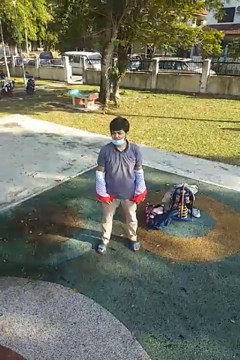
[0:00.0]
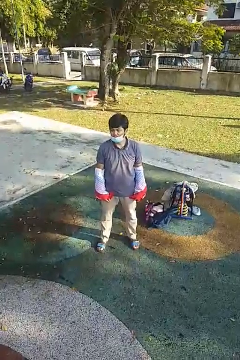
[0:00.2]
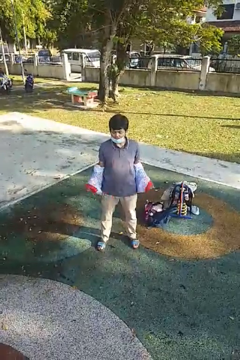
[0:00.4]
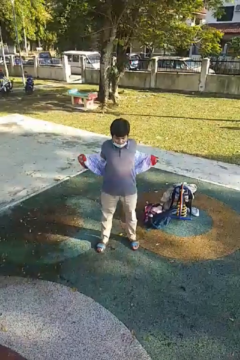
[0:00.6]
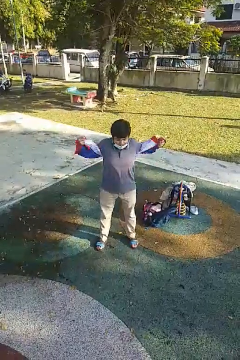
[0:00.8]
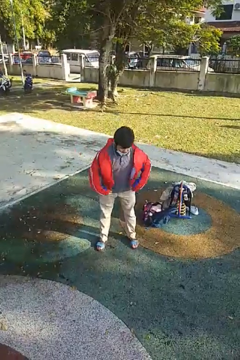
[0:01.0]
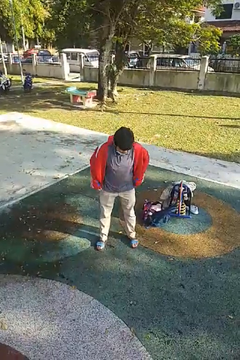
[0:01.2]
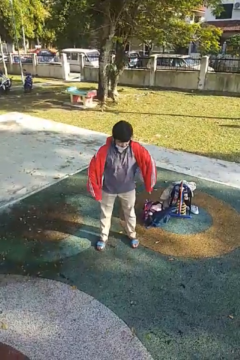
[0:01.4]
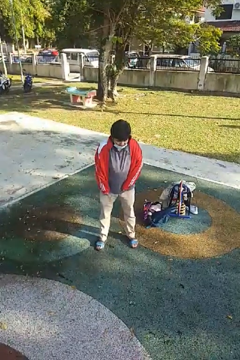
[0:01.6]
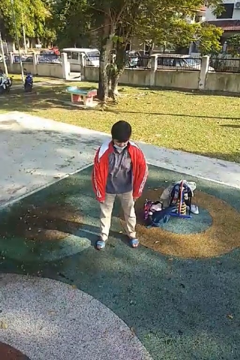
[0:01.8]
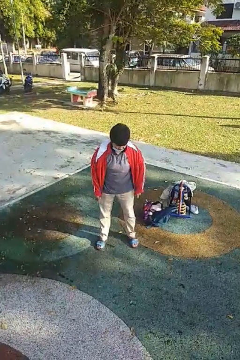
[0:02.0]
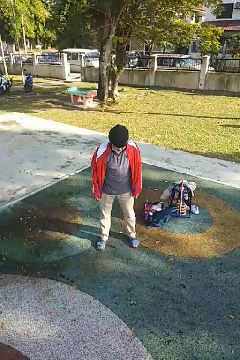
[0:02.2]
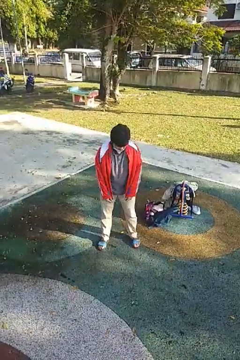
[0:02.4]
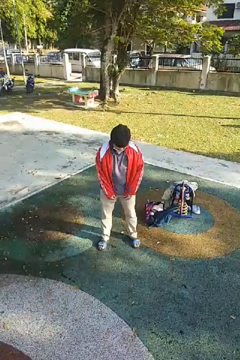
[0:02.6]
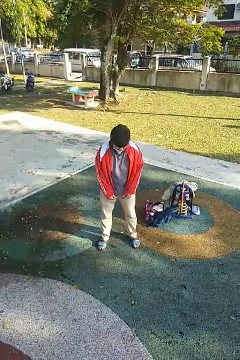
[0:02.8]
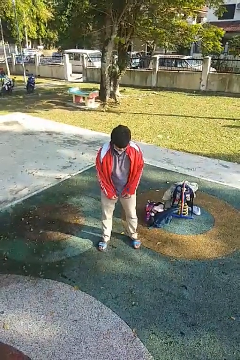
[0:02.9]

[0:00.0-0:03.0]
person puts on jacket

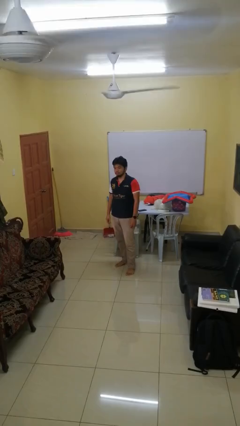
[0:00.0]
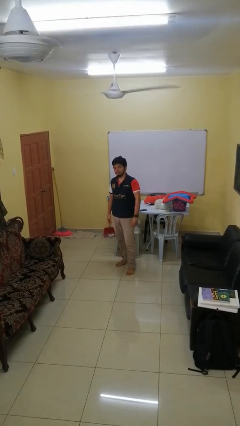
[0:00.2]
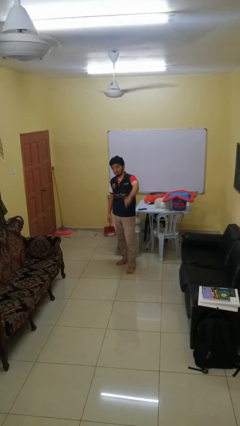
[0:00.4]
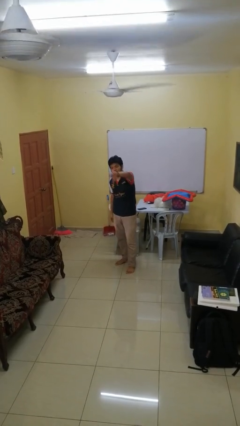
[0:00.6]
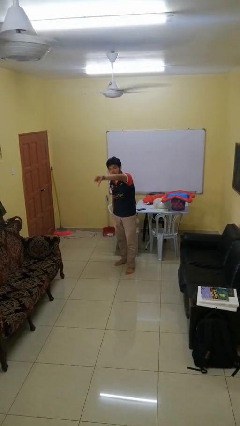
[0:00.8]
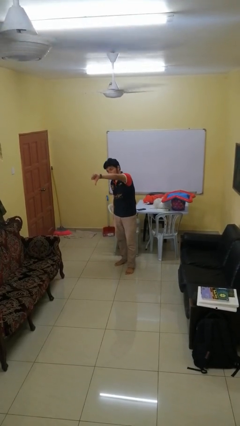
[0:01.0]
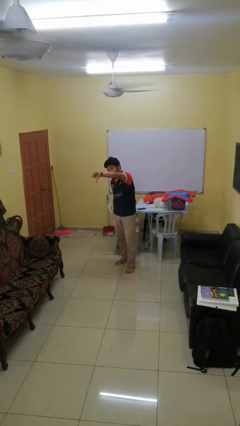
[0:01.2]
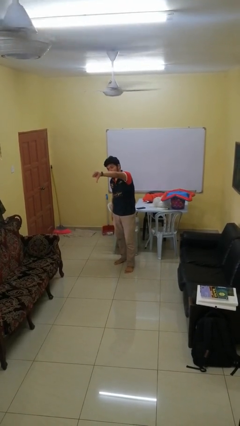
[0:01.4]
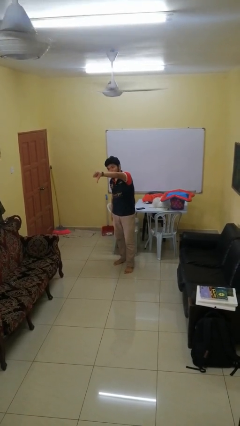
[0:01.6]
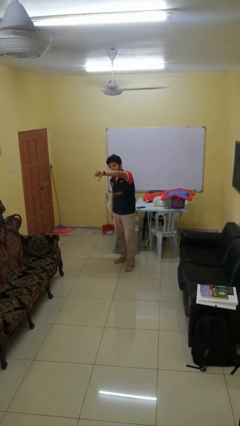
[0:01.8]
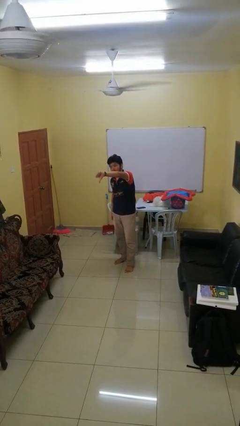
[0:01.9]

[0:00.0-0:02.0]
person gestures thumbs down

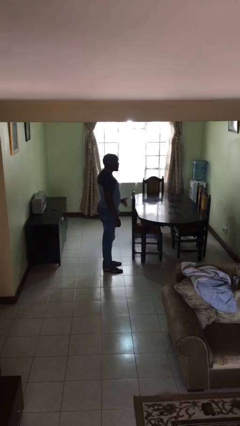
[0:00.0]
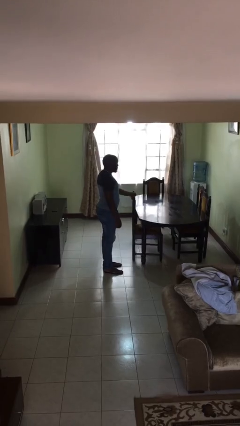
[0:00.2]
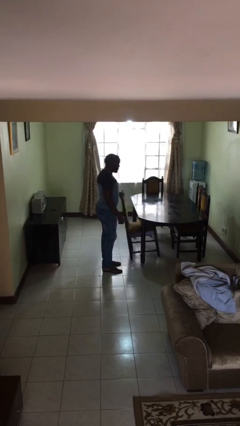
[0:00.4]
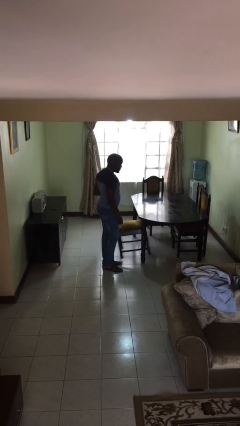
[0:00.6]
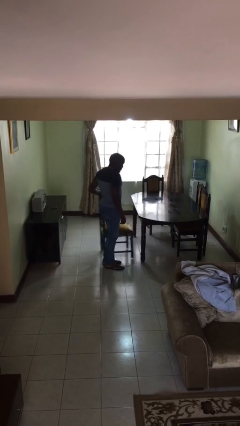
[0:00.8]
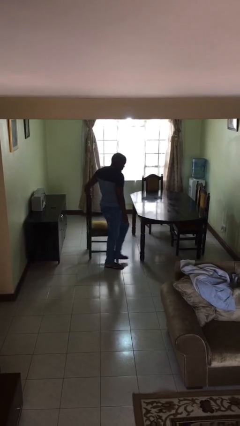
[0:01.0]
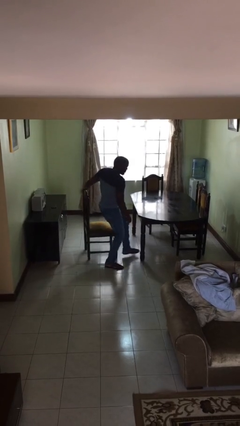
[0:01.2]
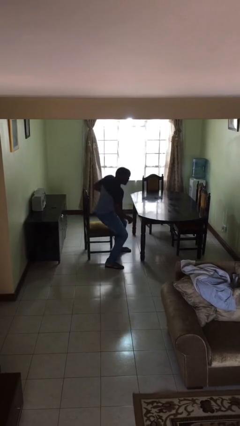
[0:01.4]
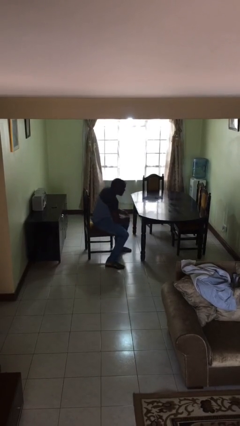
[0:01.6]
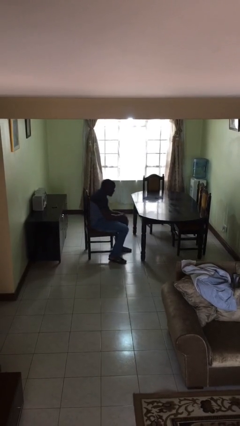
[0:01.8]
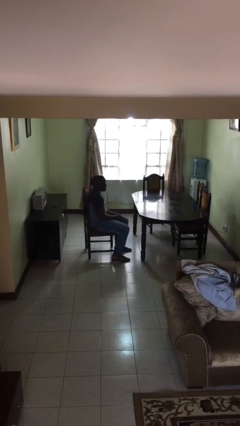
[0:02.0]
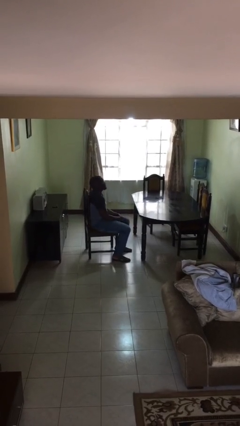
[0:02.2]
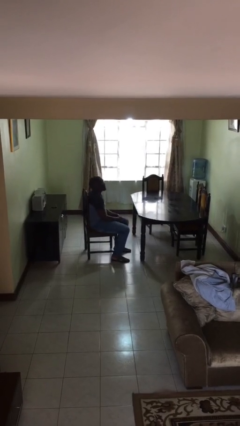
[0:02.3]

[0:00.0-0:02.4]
person sits down

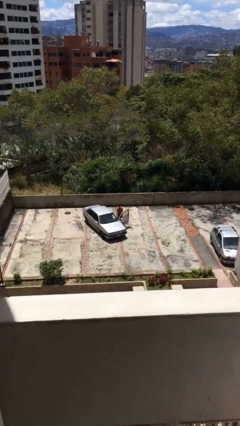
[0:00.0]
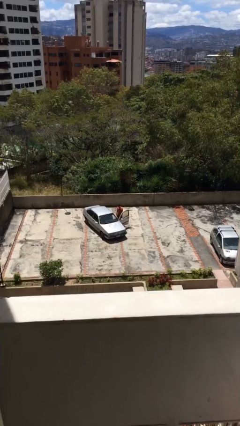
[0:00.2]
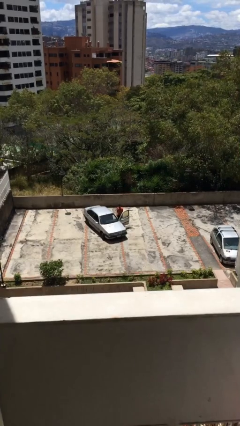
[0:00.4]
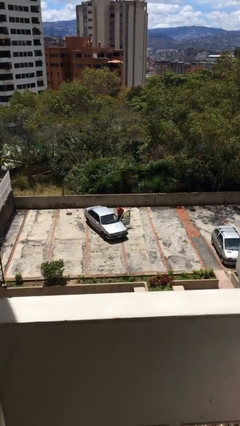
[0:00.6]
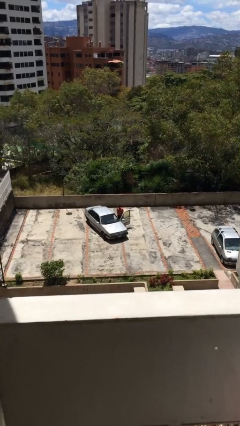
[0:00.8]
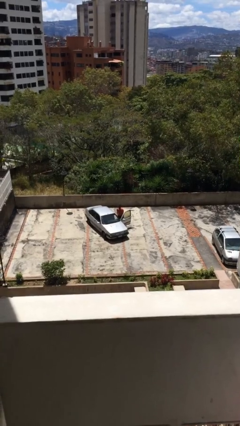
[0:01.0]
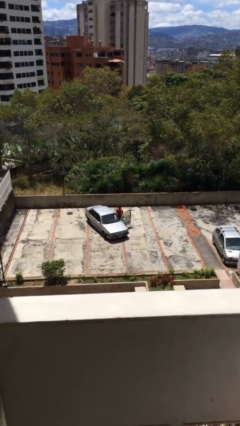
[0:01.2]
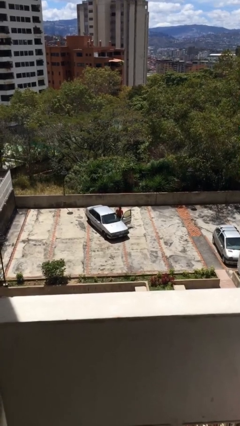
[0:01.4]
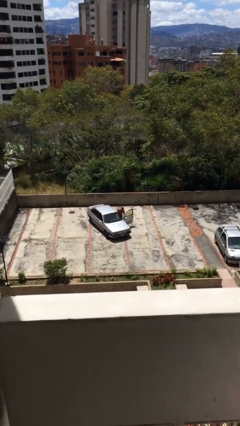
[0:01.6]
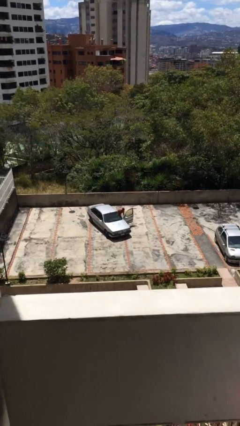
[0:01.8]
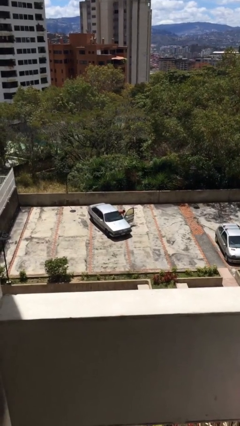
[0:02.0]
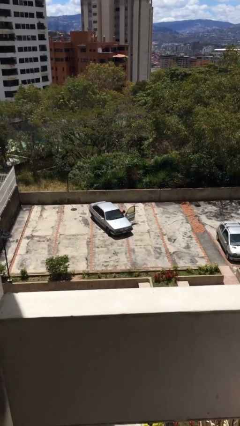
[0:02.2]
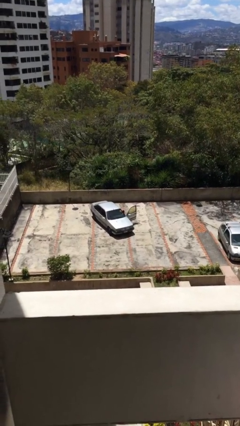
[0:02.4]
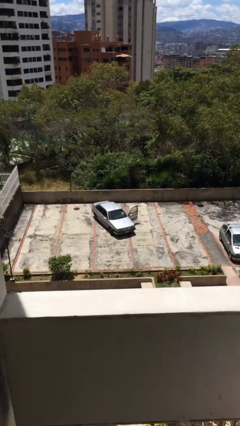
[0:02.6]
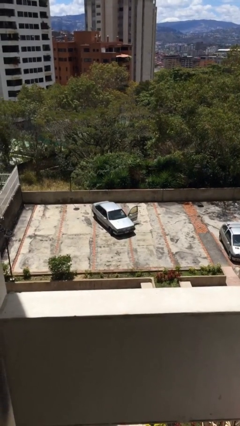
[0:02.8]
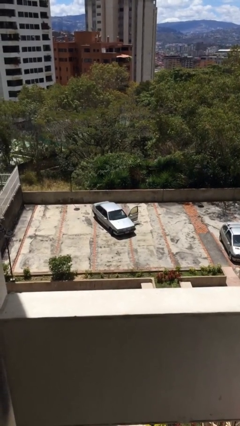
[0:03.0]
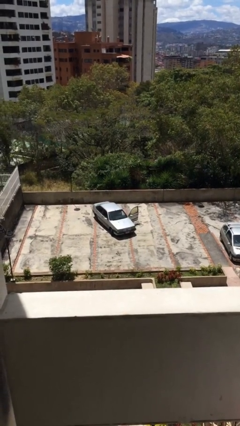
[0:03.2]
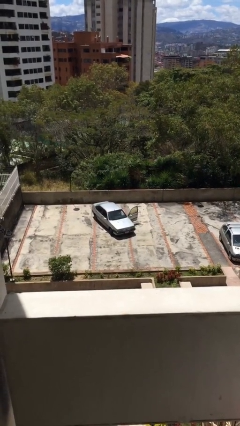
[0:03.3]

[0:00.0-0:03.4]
person enters car

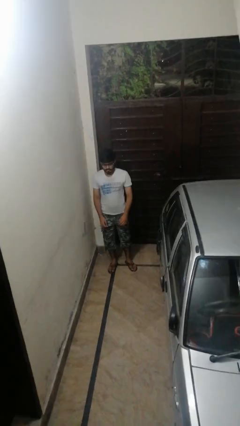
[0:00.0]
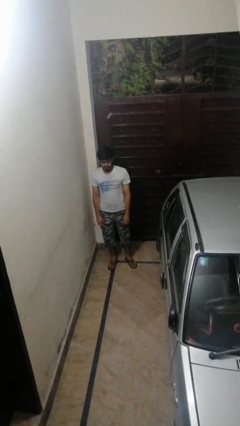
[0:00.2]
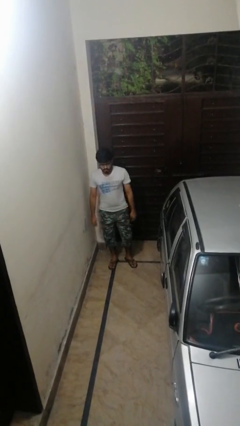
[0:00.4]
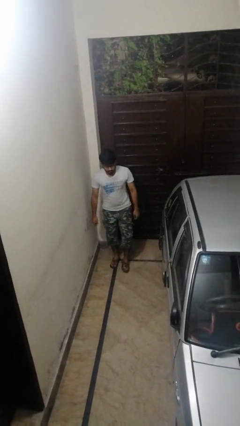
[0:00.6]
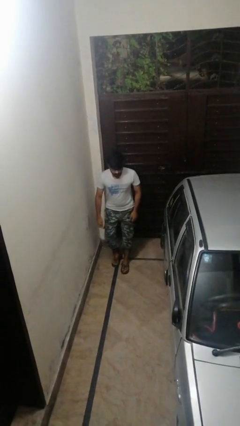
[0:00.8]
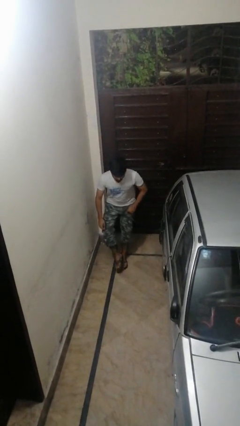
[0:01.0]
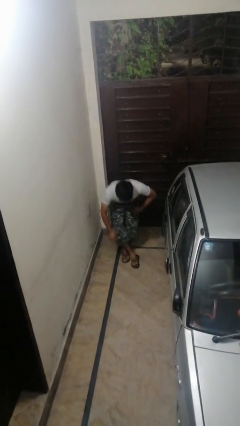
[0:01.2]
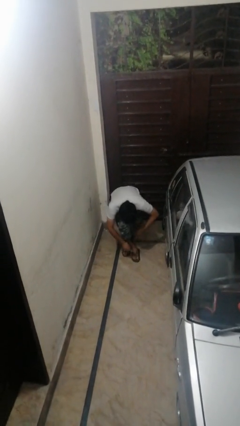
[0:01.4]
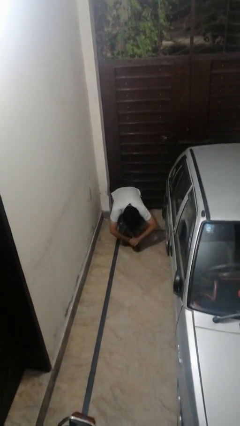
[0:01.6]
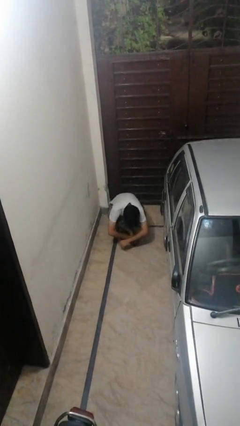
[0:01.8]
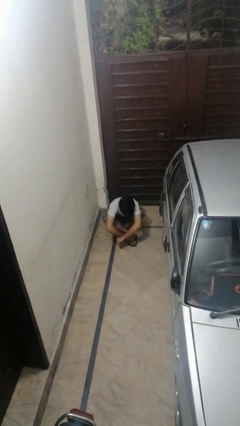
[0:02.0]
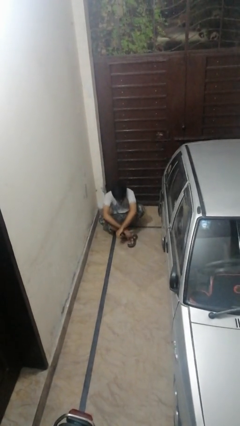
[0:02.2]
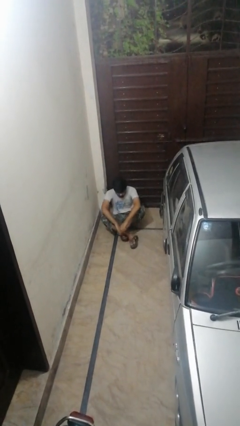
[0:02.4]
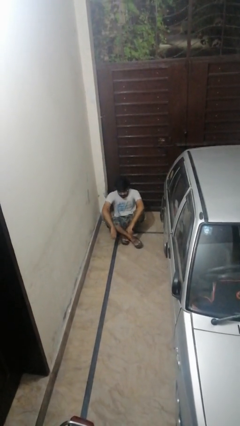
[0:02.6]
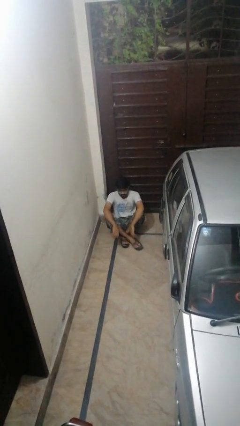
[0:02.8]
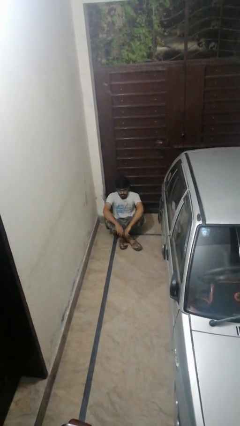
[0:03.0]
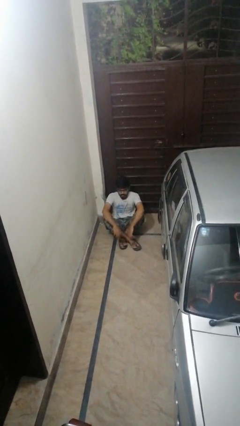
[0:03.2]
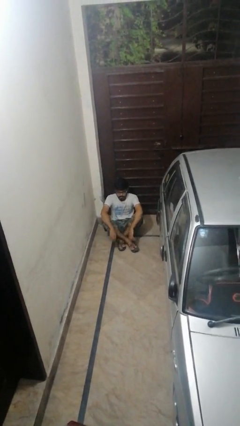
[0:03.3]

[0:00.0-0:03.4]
person sits crisscross

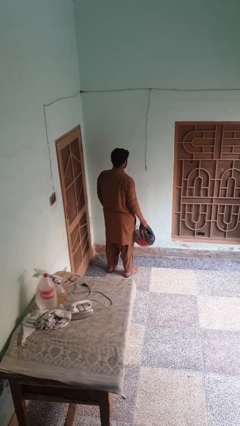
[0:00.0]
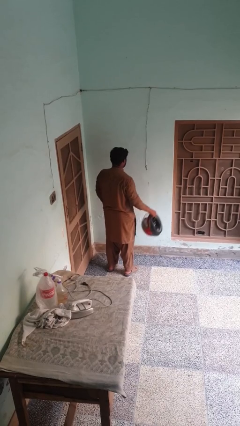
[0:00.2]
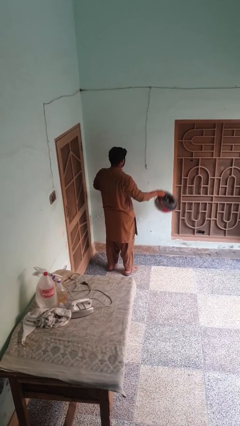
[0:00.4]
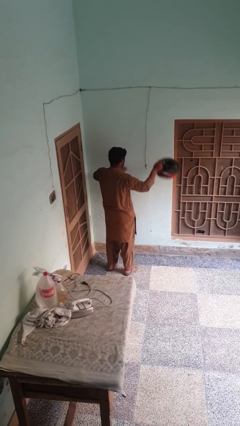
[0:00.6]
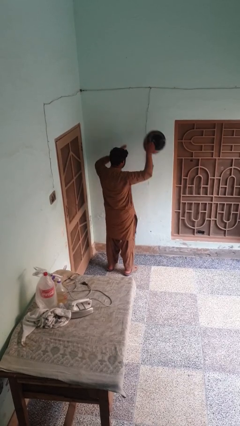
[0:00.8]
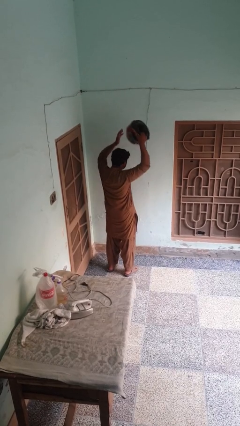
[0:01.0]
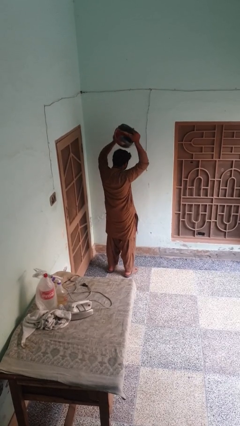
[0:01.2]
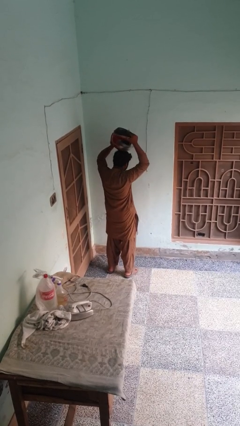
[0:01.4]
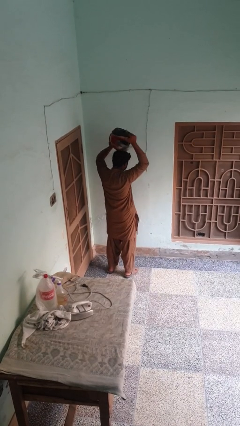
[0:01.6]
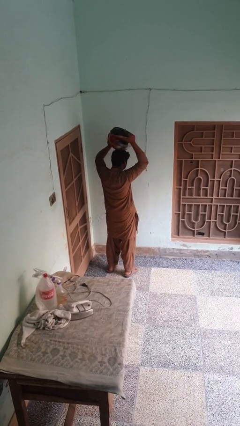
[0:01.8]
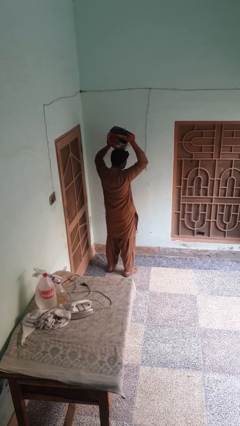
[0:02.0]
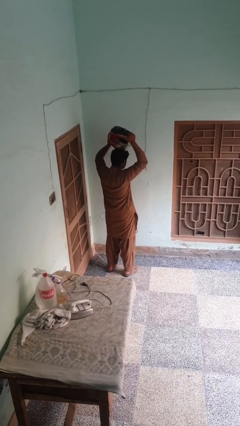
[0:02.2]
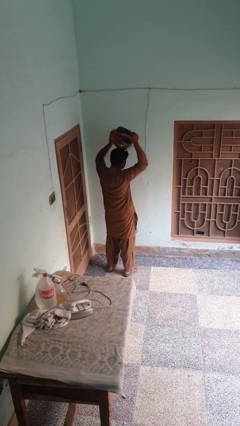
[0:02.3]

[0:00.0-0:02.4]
person holds object above head

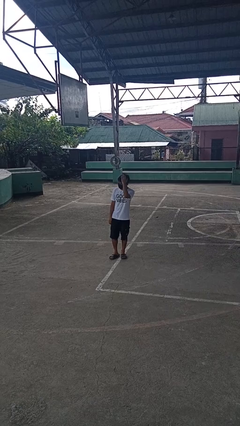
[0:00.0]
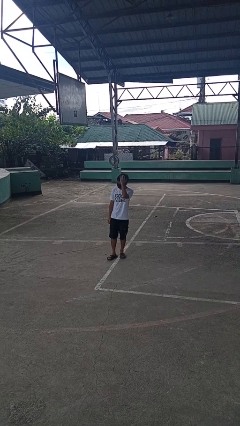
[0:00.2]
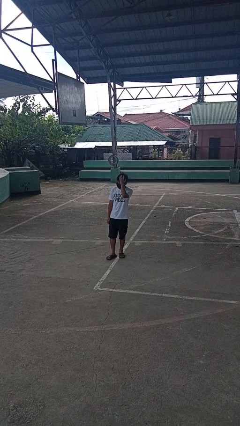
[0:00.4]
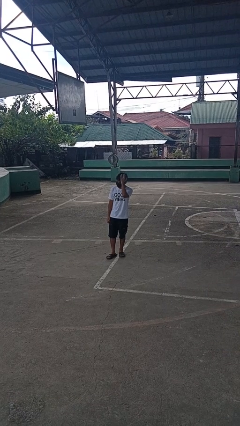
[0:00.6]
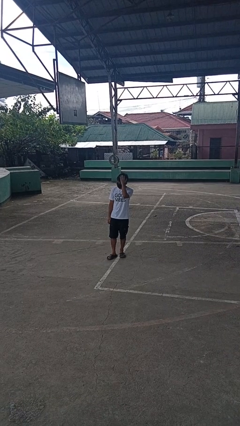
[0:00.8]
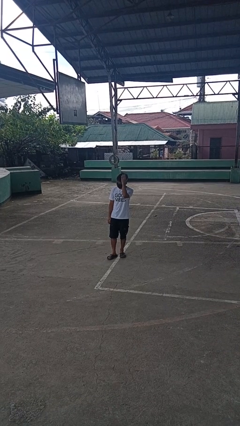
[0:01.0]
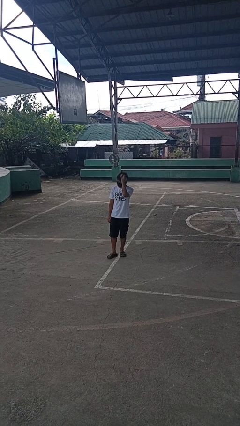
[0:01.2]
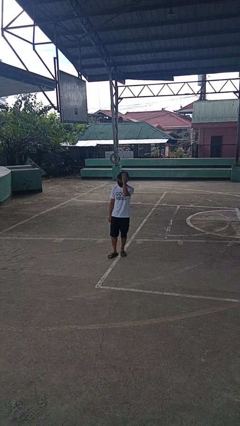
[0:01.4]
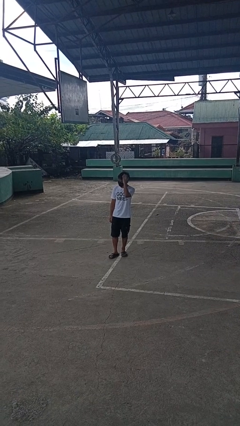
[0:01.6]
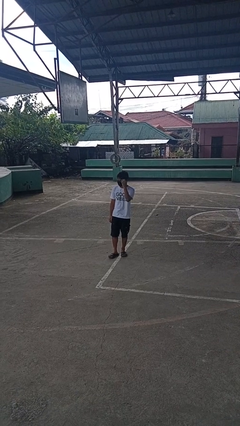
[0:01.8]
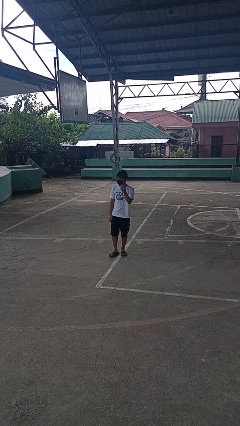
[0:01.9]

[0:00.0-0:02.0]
person pats head
